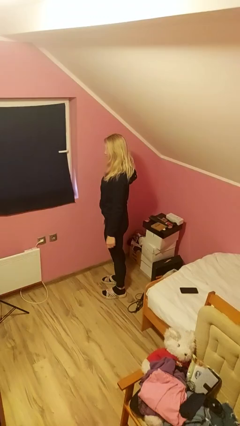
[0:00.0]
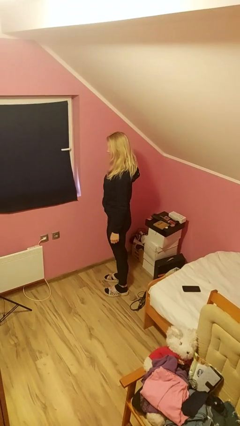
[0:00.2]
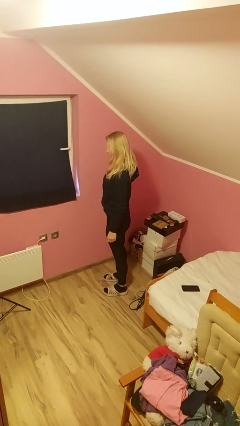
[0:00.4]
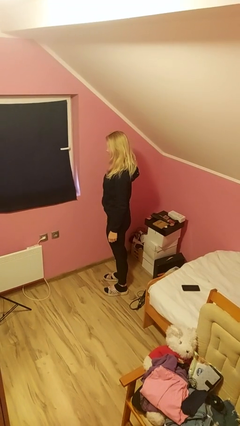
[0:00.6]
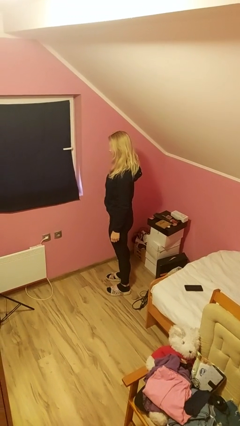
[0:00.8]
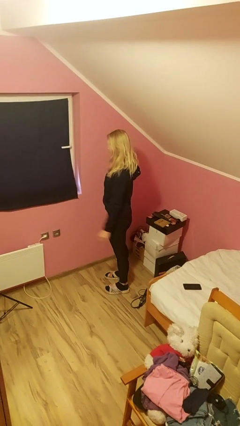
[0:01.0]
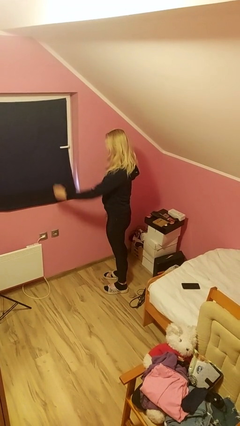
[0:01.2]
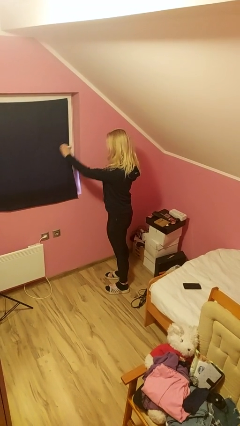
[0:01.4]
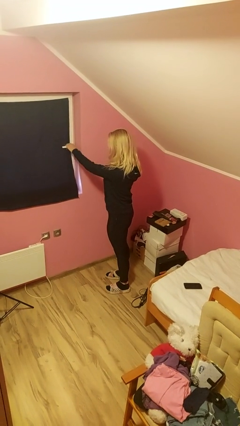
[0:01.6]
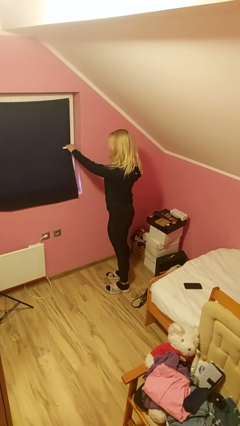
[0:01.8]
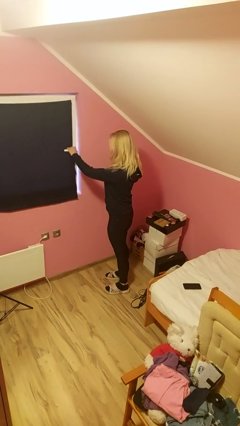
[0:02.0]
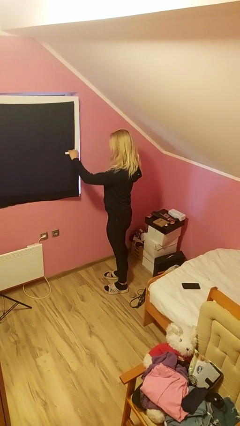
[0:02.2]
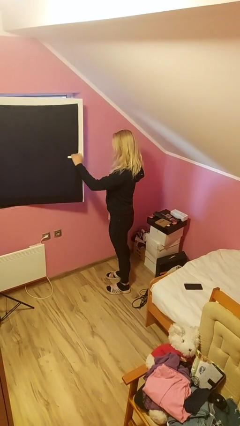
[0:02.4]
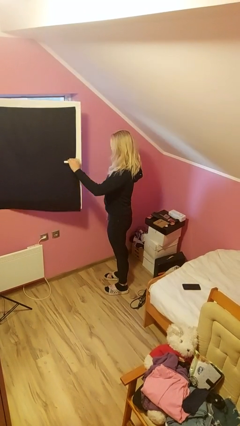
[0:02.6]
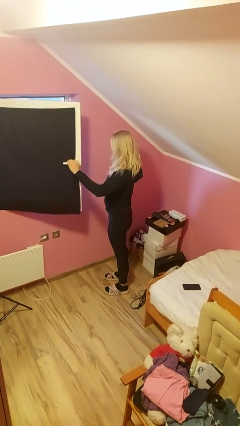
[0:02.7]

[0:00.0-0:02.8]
person opens home window

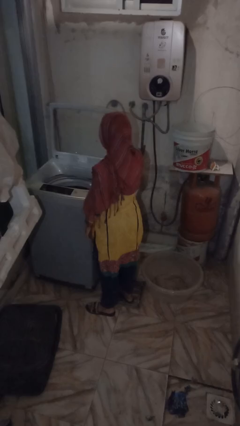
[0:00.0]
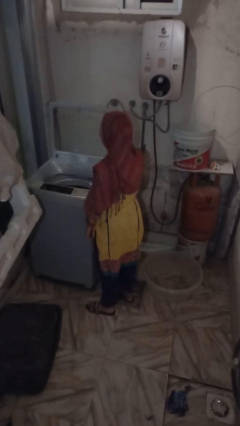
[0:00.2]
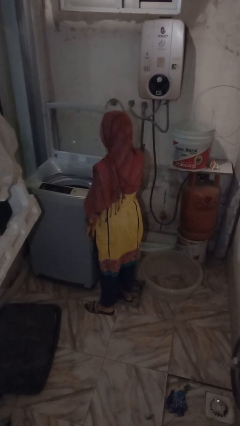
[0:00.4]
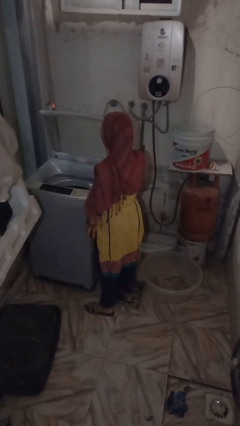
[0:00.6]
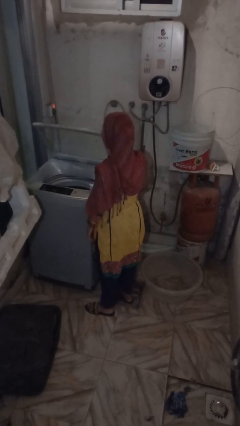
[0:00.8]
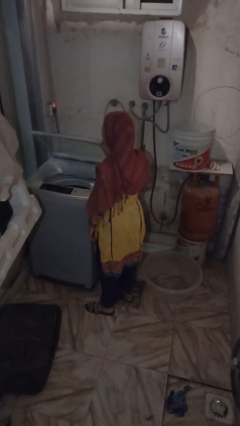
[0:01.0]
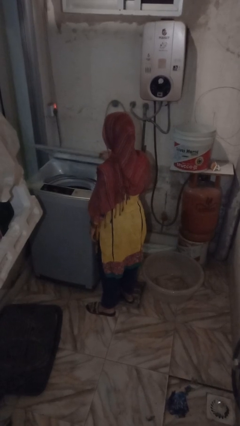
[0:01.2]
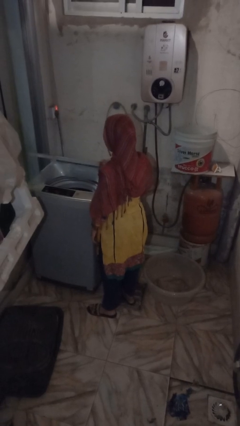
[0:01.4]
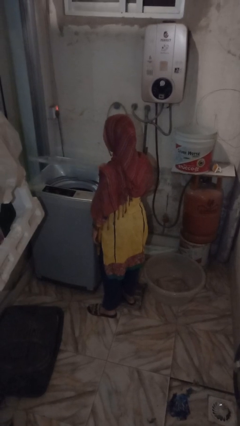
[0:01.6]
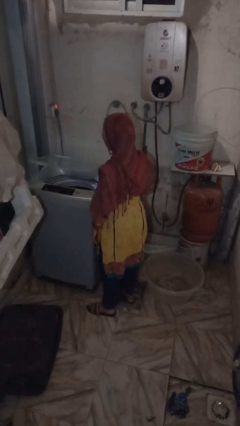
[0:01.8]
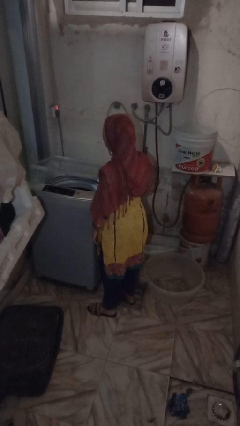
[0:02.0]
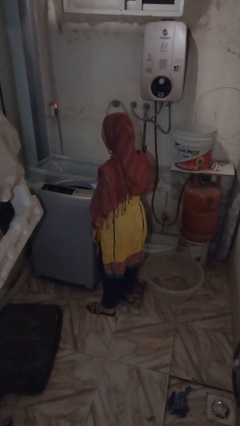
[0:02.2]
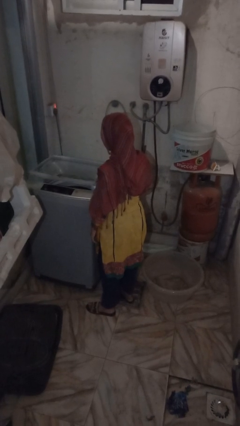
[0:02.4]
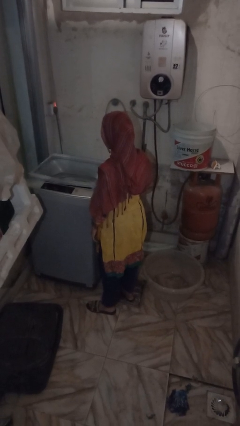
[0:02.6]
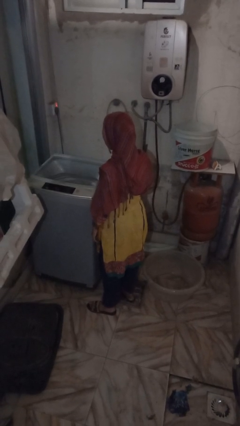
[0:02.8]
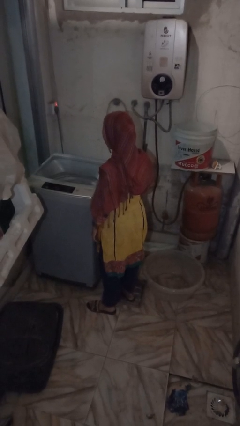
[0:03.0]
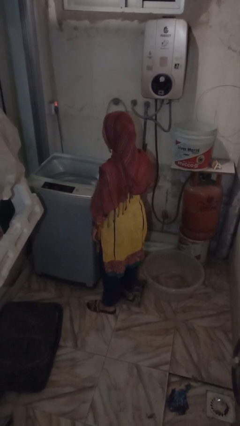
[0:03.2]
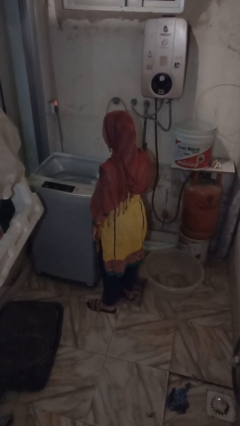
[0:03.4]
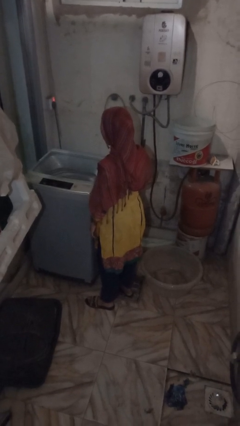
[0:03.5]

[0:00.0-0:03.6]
person closes clothes washer

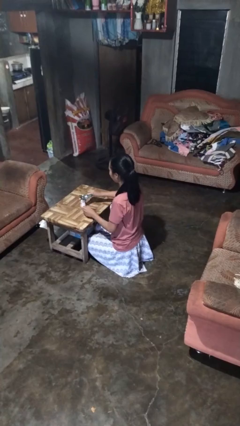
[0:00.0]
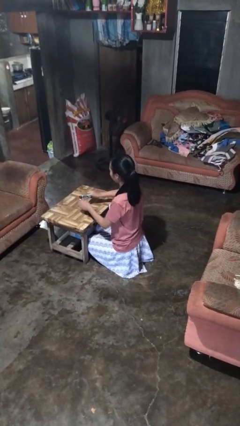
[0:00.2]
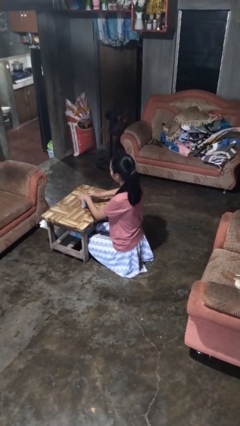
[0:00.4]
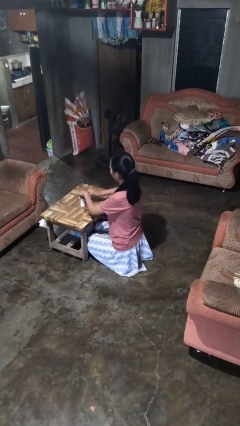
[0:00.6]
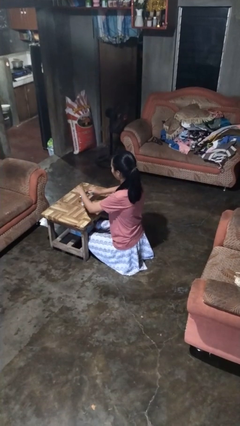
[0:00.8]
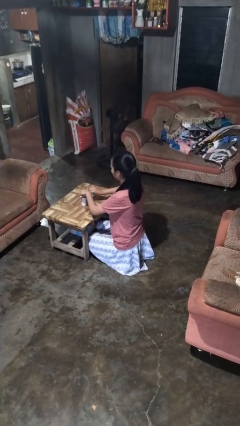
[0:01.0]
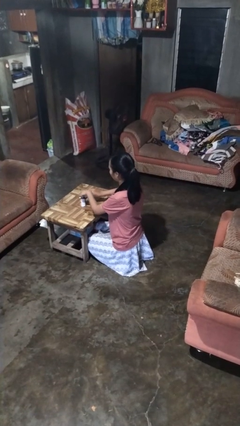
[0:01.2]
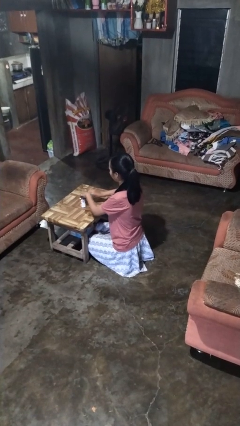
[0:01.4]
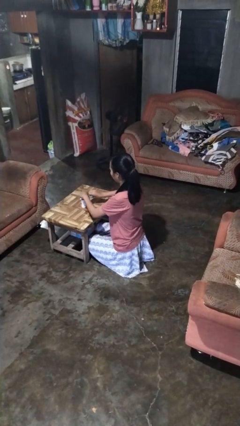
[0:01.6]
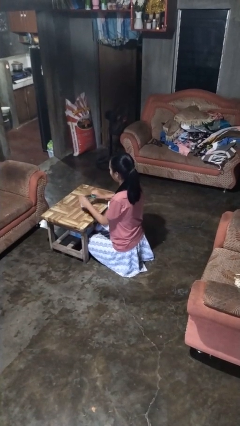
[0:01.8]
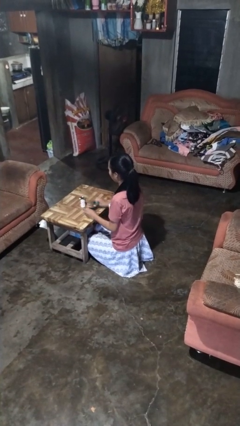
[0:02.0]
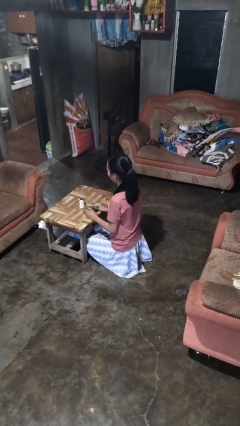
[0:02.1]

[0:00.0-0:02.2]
person opens can with can opener

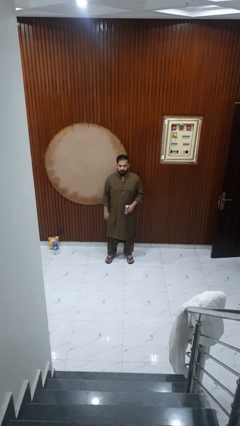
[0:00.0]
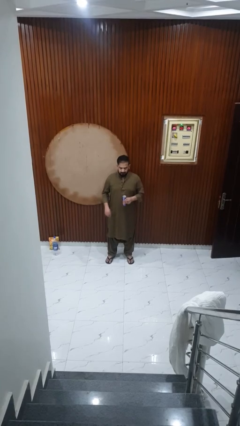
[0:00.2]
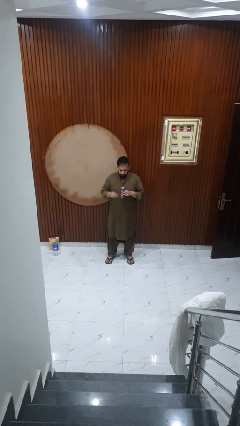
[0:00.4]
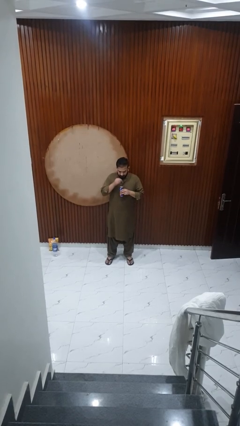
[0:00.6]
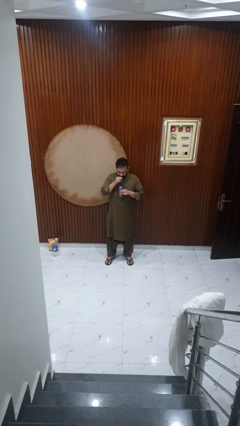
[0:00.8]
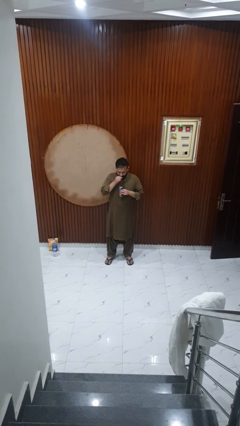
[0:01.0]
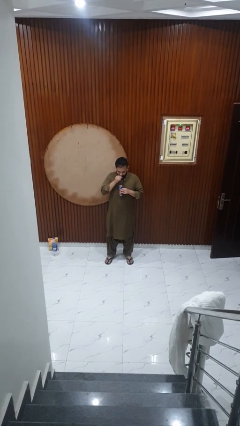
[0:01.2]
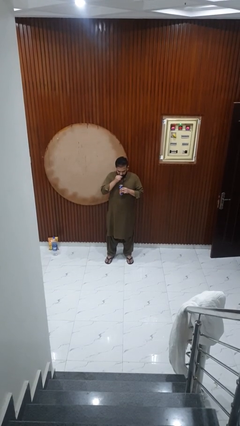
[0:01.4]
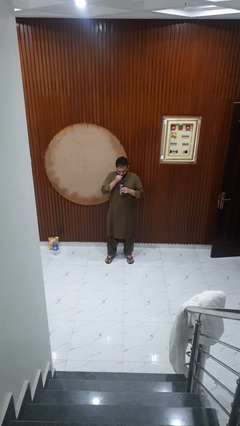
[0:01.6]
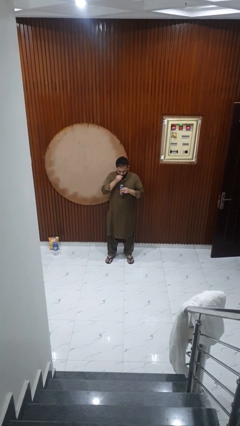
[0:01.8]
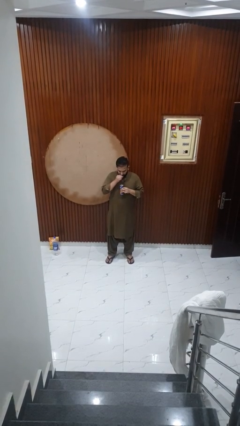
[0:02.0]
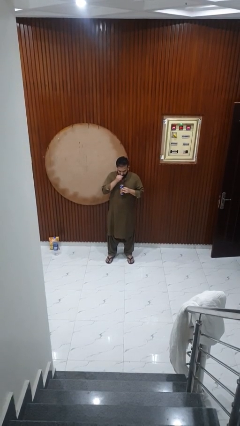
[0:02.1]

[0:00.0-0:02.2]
person drinks from straw

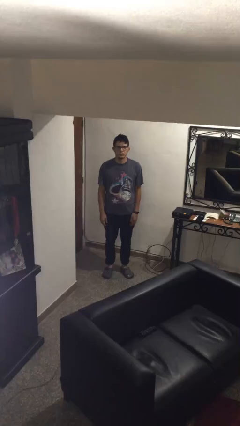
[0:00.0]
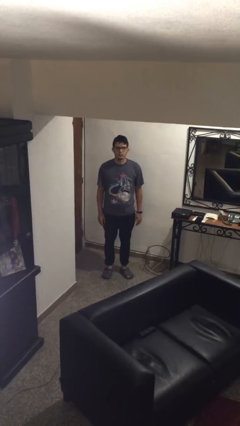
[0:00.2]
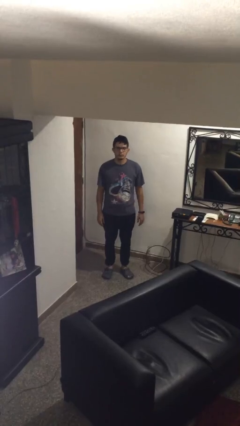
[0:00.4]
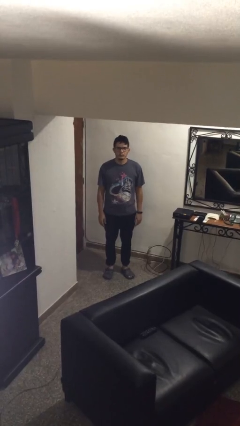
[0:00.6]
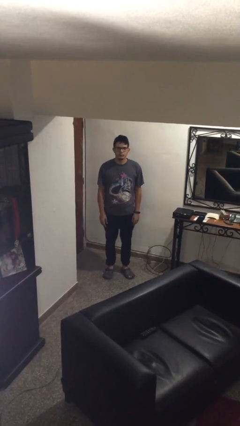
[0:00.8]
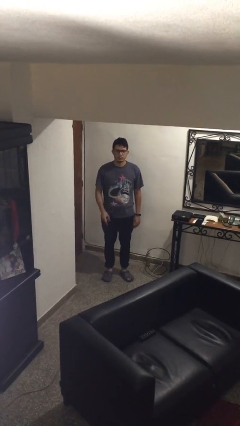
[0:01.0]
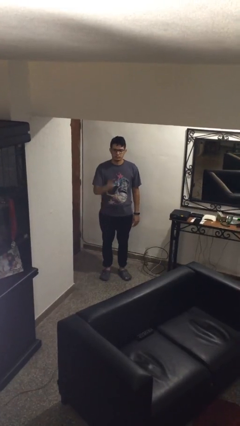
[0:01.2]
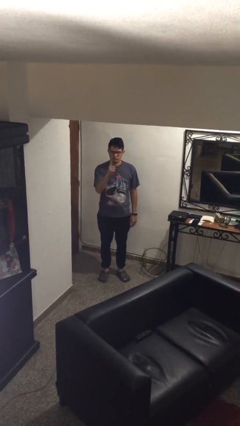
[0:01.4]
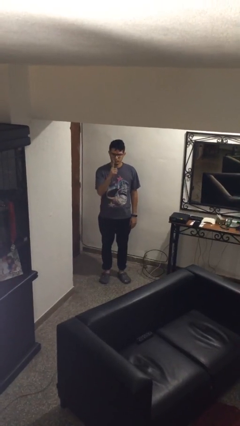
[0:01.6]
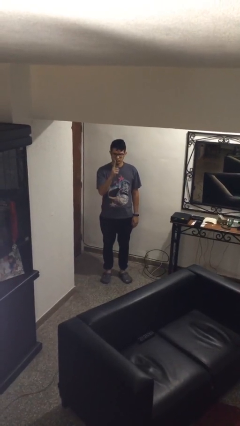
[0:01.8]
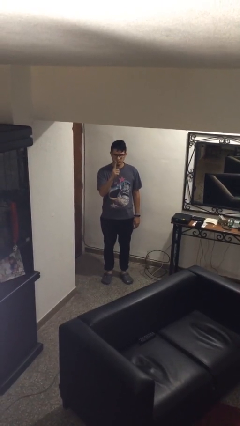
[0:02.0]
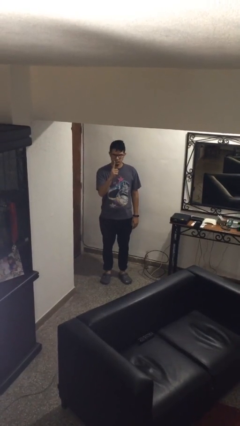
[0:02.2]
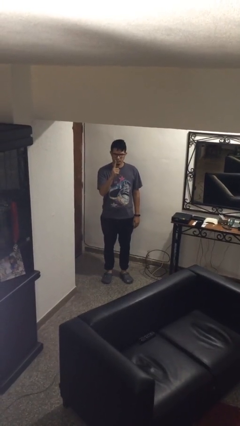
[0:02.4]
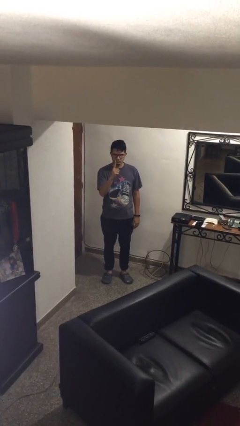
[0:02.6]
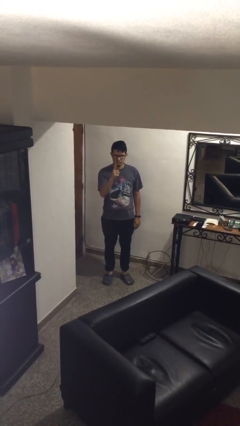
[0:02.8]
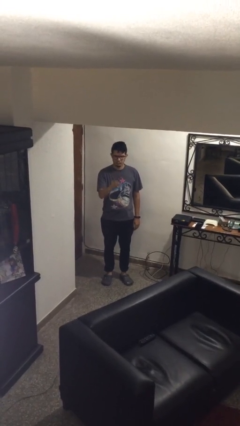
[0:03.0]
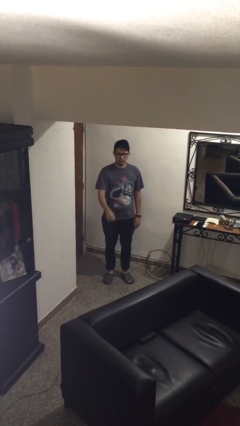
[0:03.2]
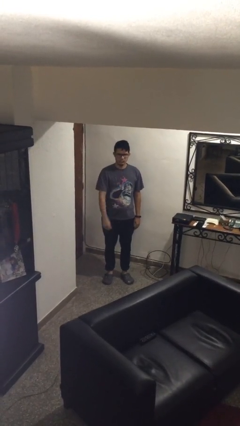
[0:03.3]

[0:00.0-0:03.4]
person gestures number one

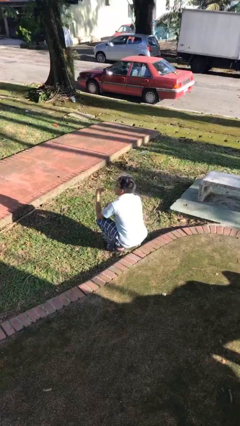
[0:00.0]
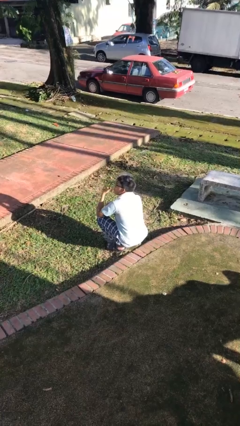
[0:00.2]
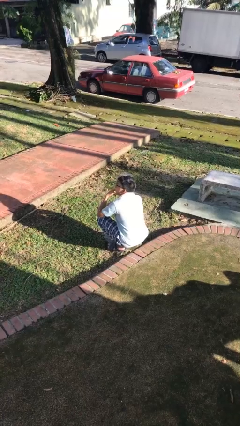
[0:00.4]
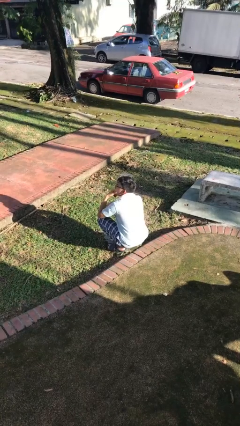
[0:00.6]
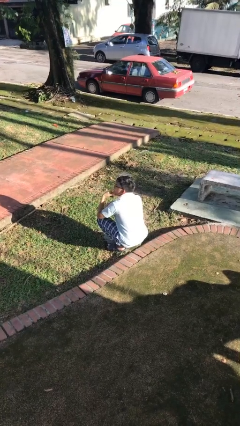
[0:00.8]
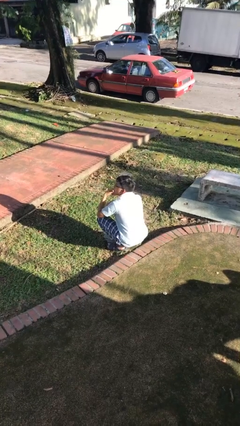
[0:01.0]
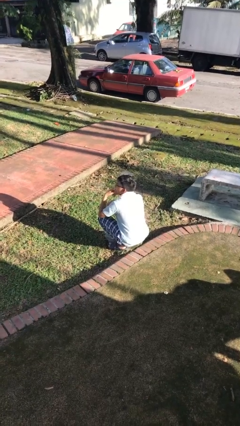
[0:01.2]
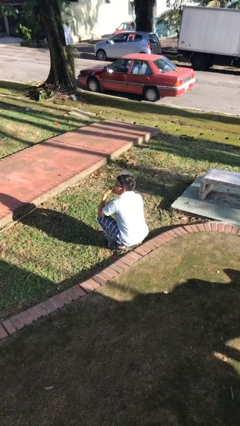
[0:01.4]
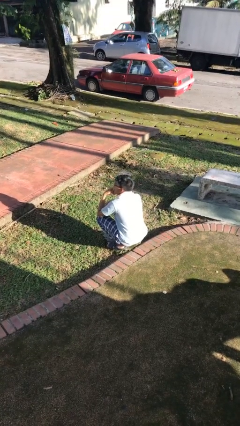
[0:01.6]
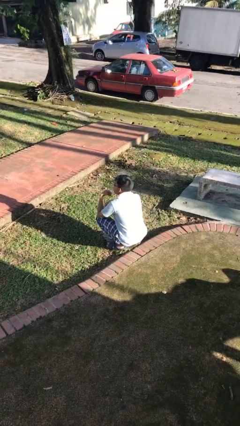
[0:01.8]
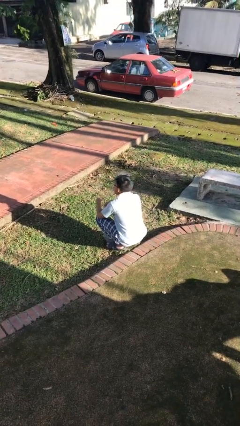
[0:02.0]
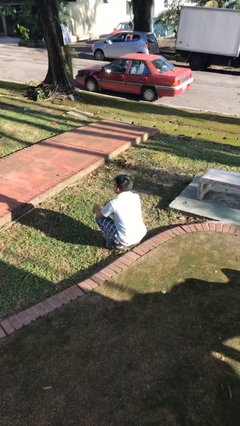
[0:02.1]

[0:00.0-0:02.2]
person strokes chin

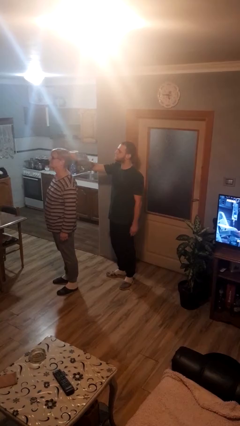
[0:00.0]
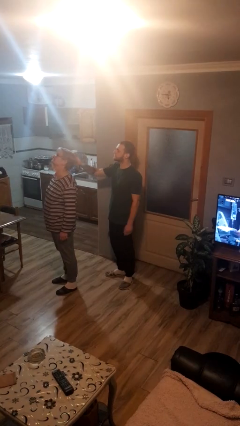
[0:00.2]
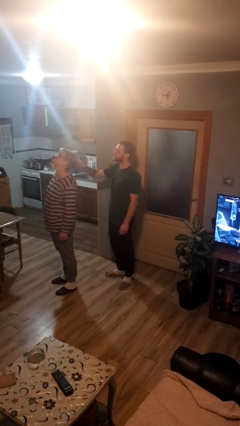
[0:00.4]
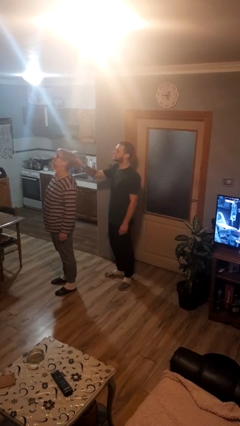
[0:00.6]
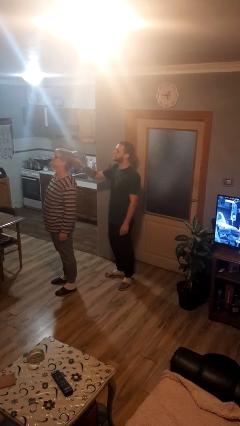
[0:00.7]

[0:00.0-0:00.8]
person grabs person by hair
